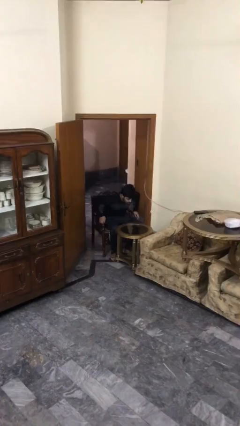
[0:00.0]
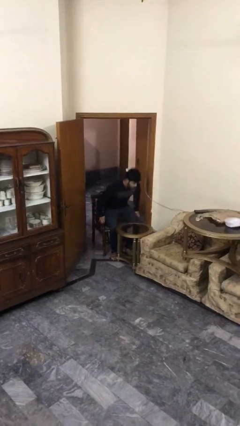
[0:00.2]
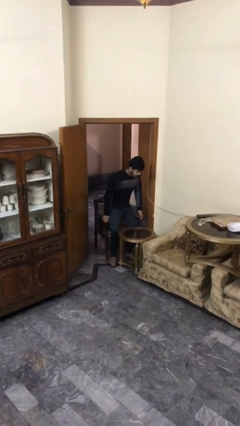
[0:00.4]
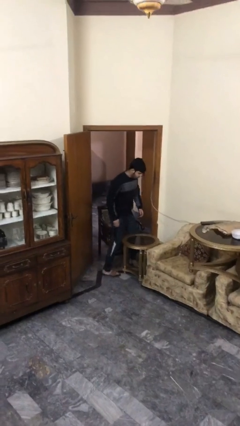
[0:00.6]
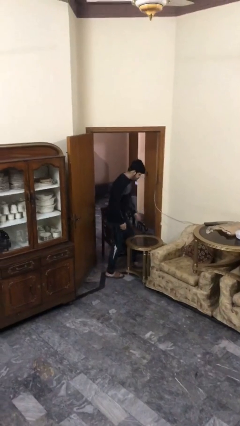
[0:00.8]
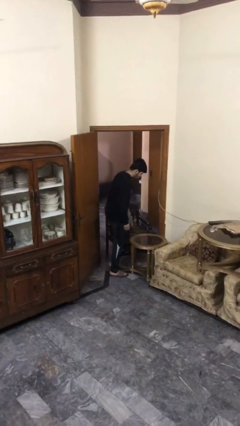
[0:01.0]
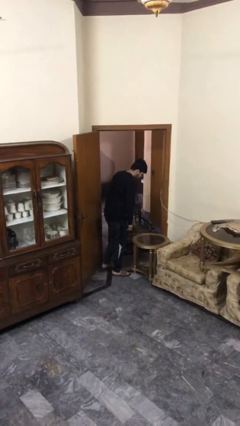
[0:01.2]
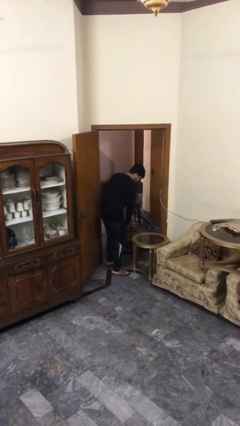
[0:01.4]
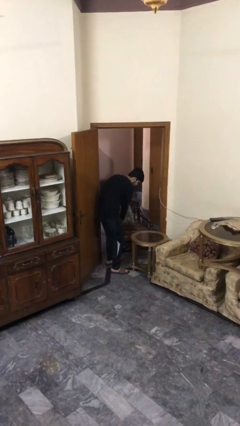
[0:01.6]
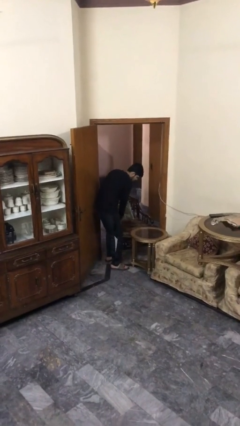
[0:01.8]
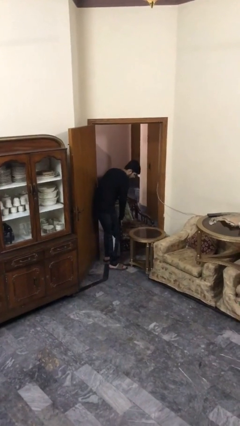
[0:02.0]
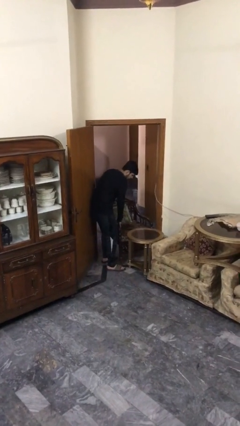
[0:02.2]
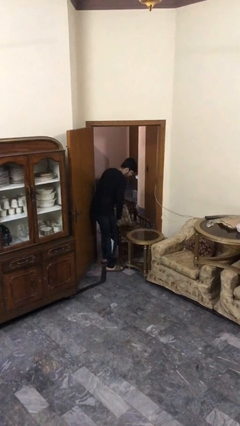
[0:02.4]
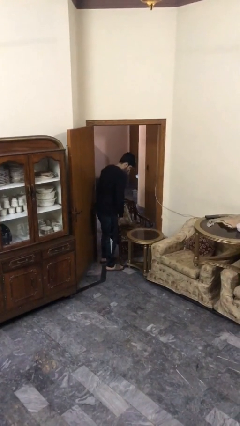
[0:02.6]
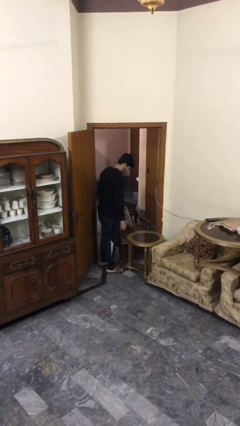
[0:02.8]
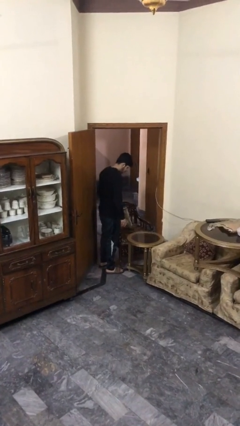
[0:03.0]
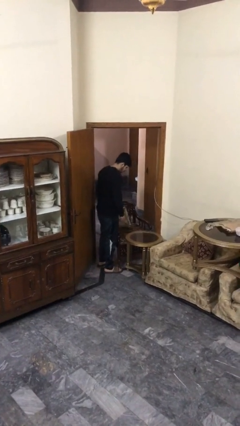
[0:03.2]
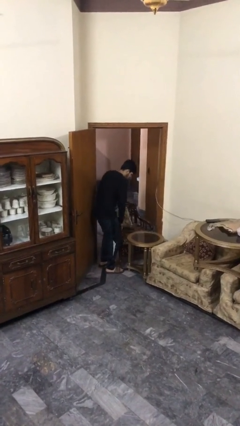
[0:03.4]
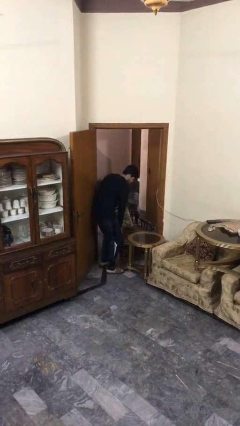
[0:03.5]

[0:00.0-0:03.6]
person stands up

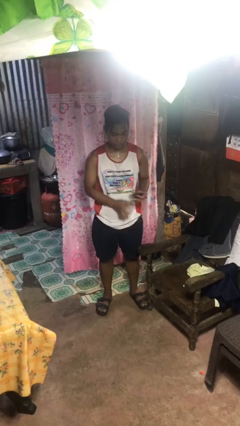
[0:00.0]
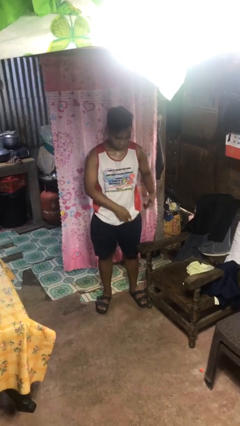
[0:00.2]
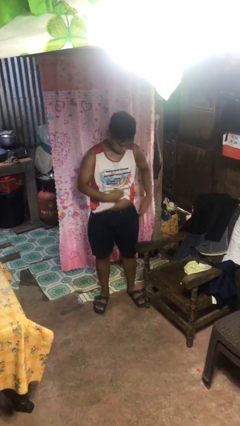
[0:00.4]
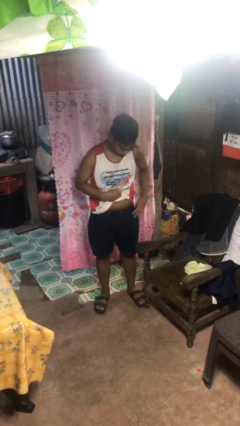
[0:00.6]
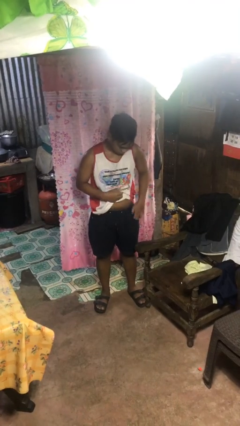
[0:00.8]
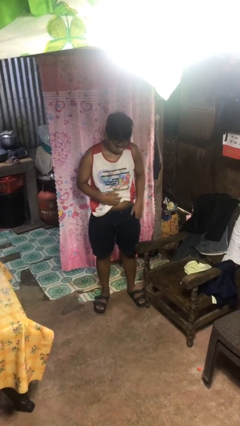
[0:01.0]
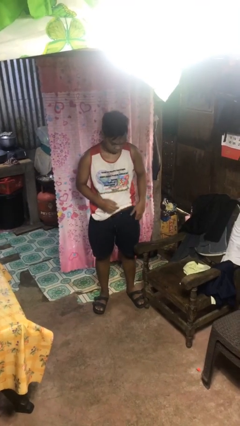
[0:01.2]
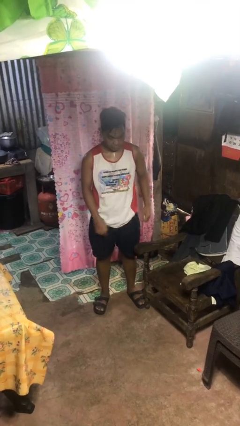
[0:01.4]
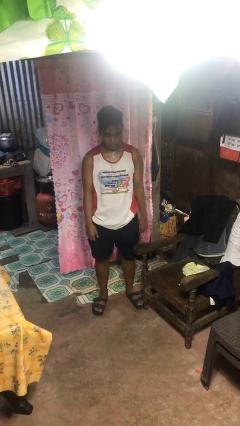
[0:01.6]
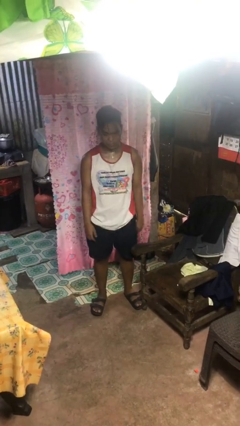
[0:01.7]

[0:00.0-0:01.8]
person puts phone into pocket

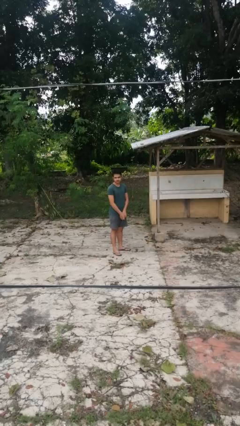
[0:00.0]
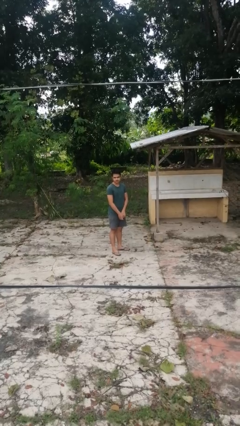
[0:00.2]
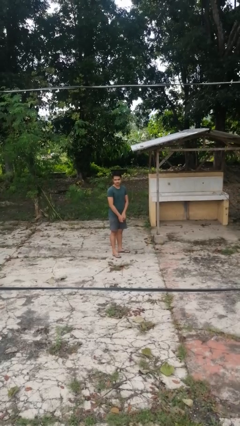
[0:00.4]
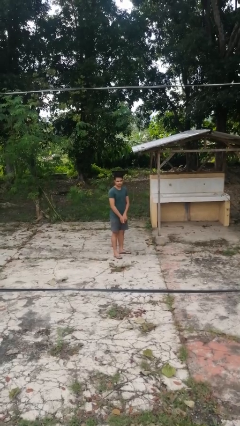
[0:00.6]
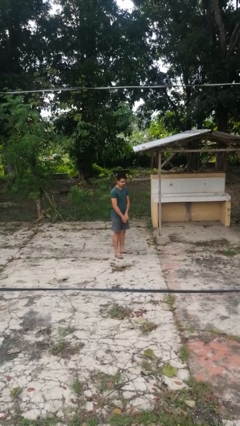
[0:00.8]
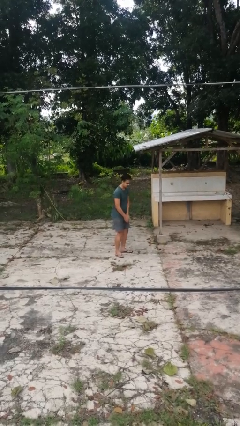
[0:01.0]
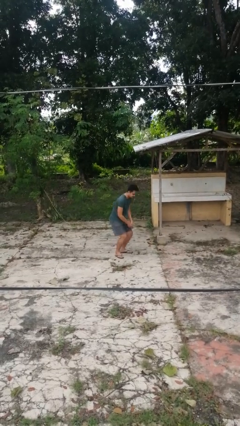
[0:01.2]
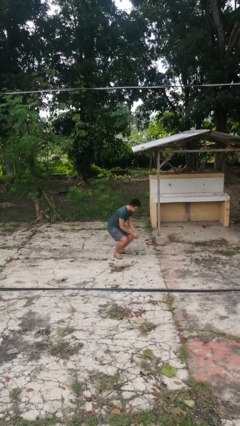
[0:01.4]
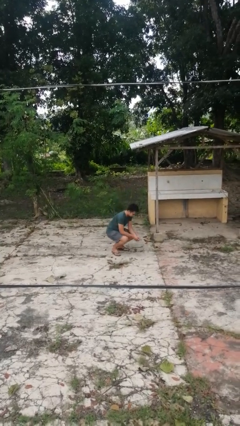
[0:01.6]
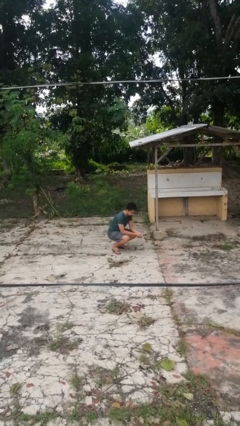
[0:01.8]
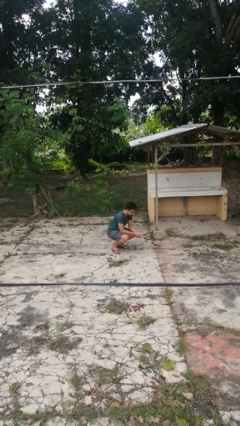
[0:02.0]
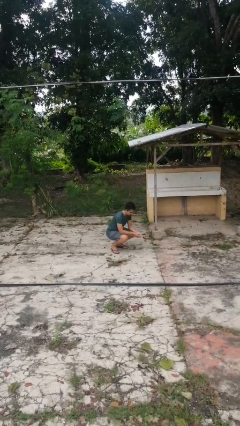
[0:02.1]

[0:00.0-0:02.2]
person squats

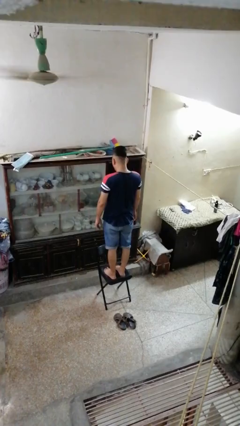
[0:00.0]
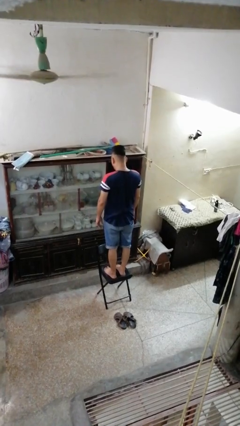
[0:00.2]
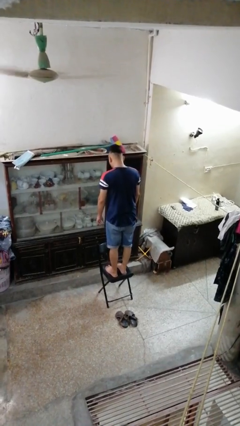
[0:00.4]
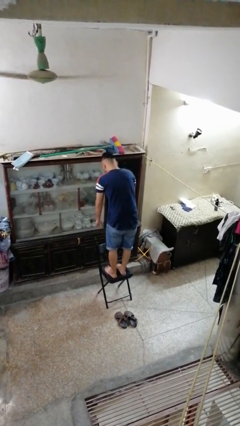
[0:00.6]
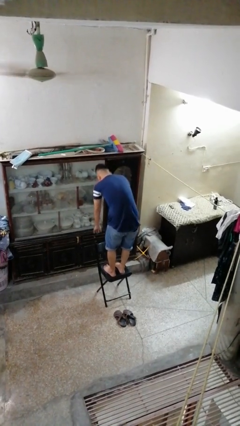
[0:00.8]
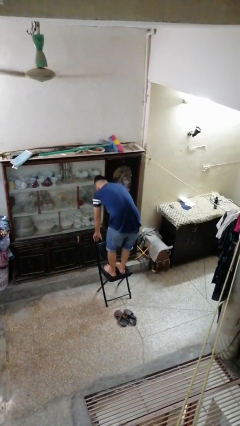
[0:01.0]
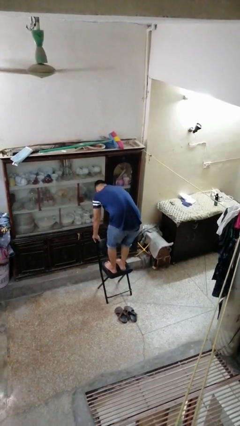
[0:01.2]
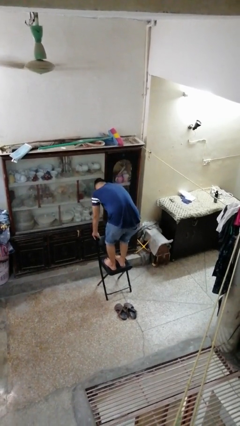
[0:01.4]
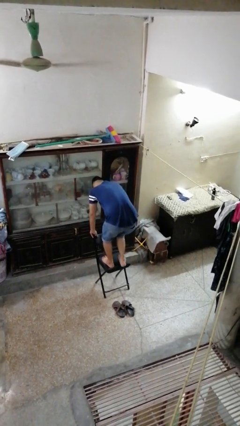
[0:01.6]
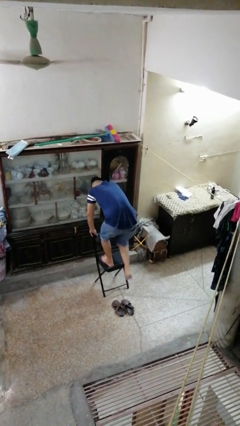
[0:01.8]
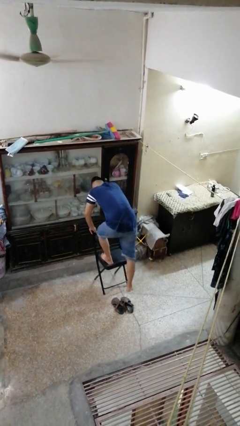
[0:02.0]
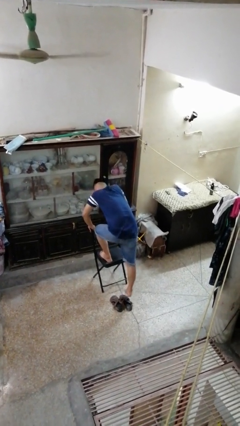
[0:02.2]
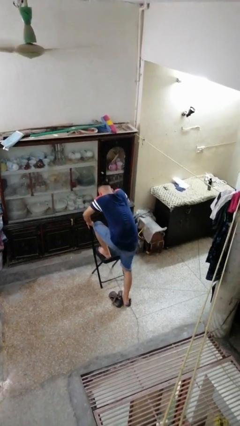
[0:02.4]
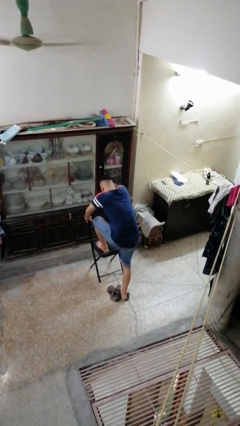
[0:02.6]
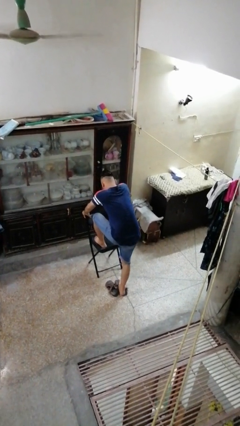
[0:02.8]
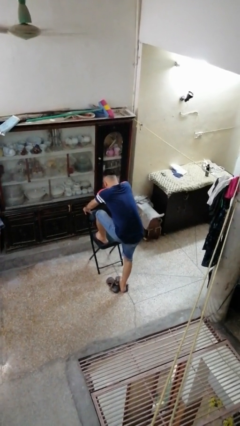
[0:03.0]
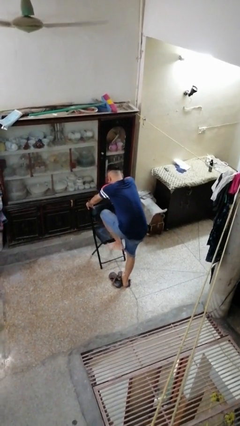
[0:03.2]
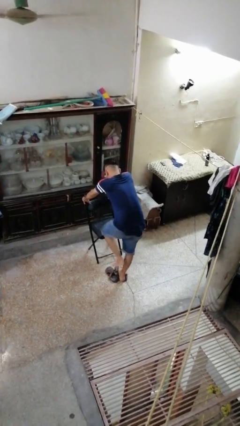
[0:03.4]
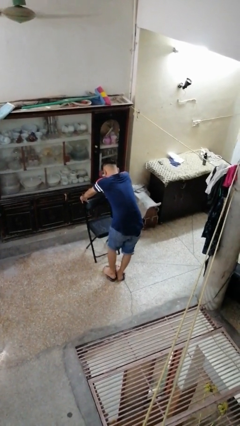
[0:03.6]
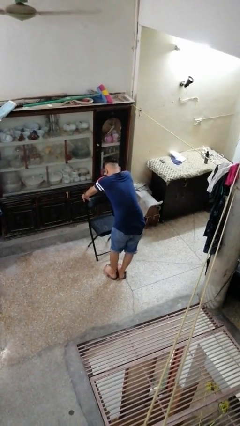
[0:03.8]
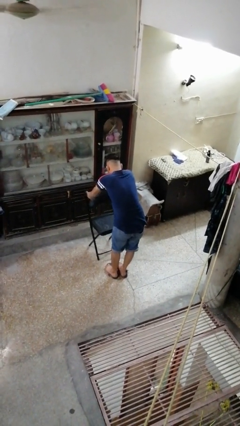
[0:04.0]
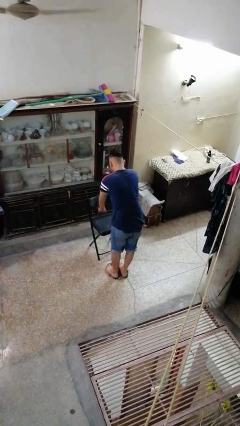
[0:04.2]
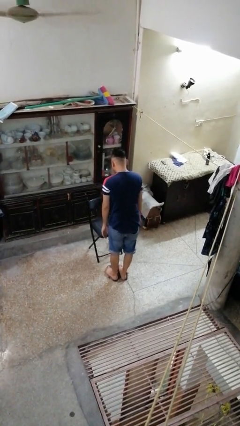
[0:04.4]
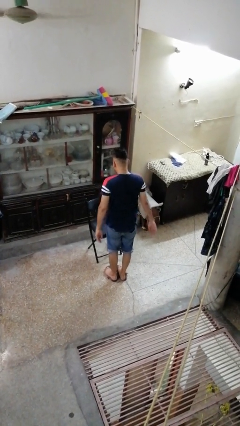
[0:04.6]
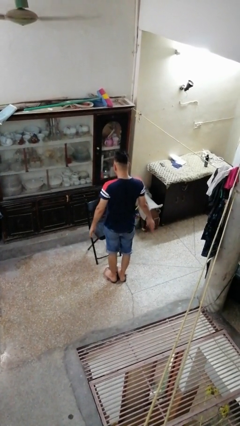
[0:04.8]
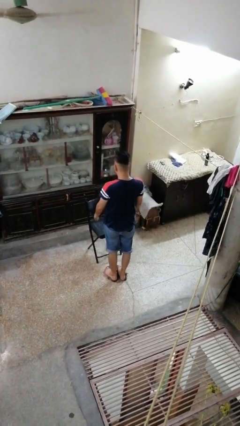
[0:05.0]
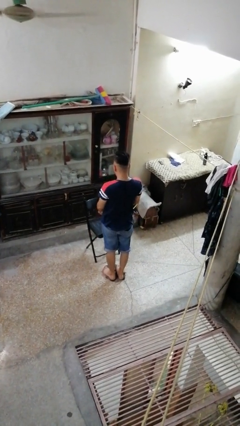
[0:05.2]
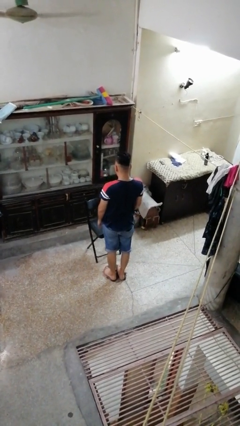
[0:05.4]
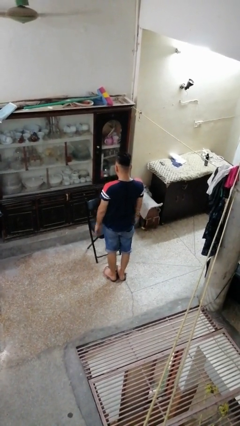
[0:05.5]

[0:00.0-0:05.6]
person climbs off chair

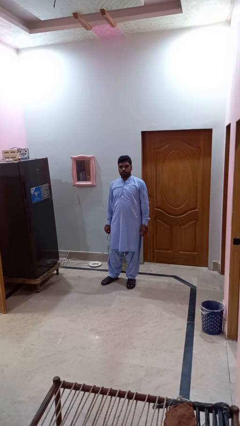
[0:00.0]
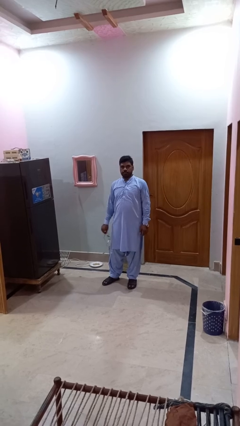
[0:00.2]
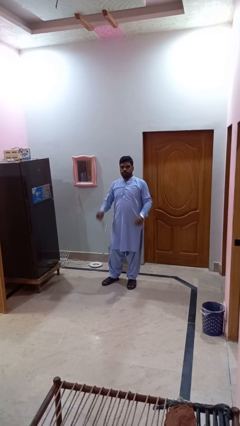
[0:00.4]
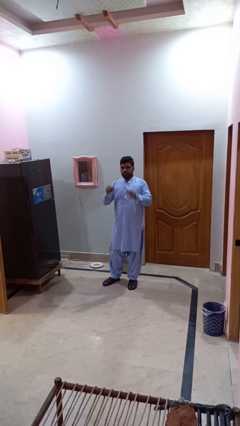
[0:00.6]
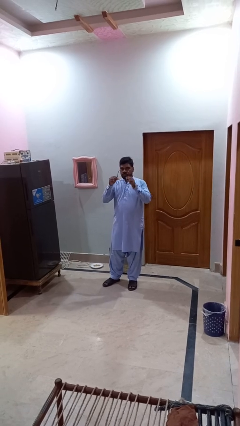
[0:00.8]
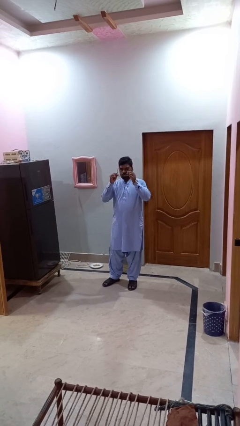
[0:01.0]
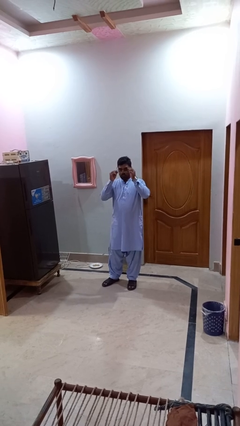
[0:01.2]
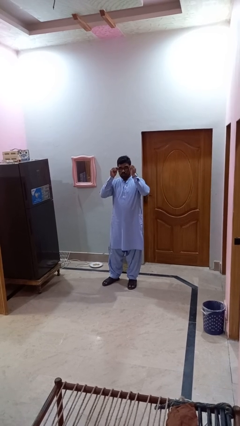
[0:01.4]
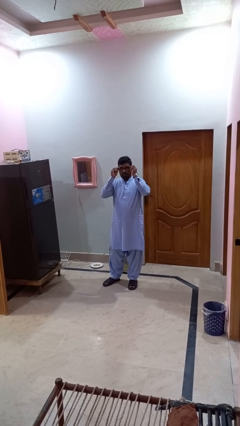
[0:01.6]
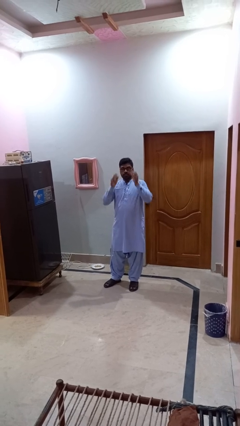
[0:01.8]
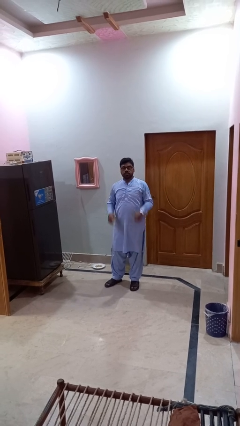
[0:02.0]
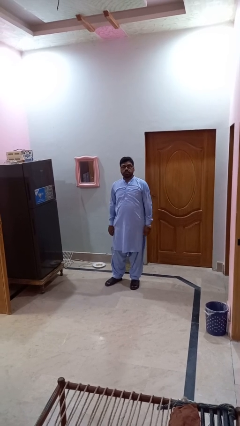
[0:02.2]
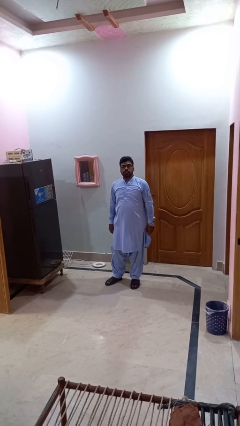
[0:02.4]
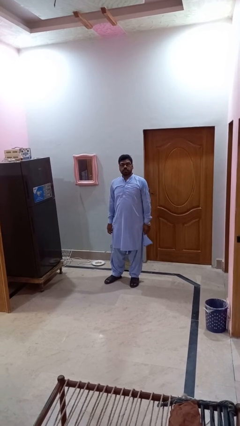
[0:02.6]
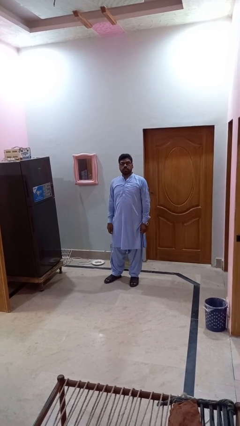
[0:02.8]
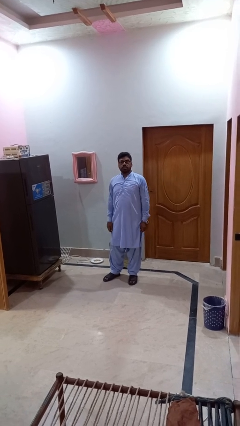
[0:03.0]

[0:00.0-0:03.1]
person puts on glasses

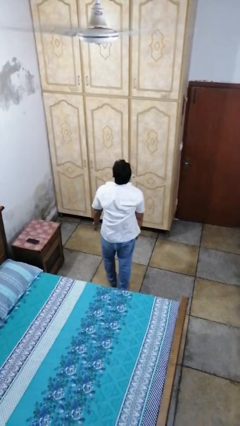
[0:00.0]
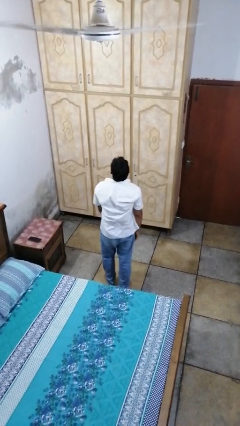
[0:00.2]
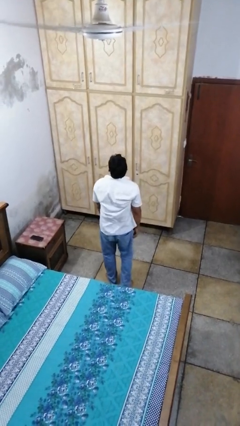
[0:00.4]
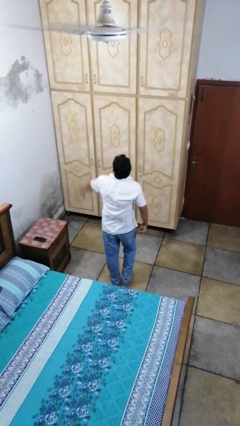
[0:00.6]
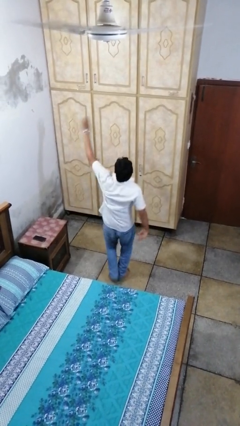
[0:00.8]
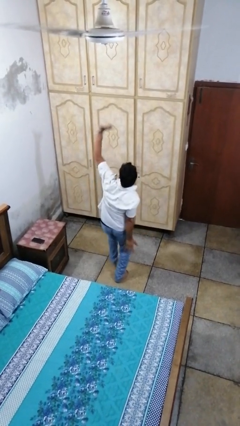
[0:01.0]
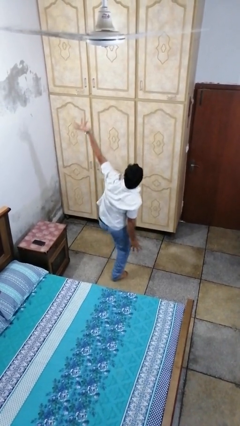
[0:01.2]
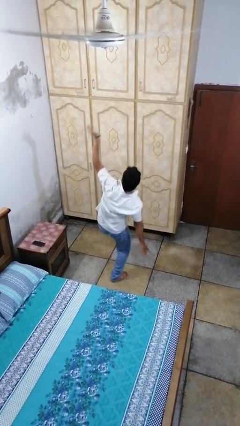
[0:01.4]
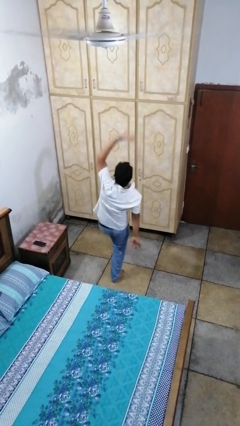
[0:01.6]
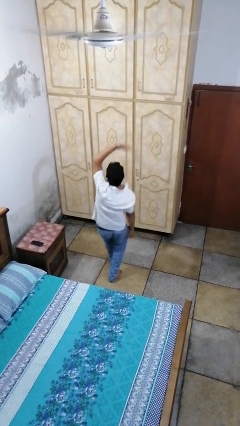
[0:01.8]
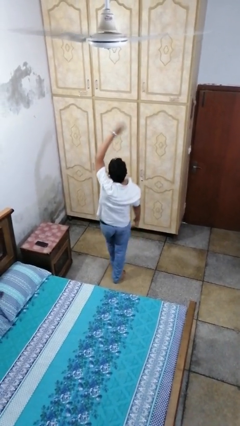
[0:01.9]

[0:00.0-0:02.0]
person dances in place
